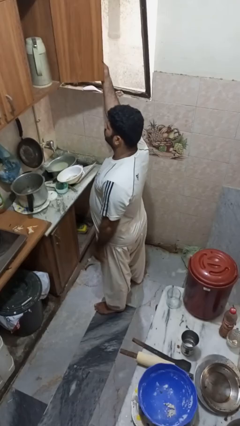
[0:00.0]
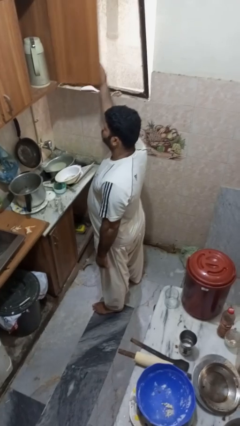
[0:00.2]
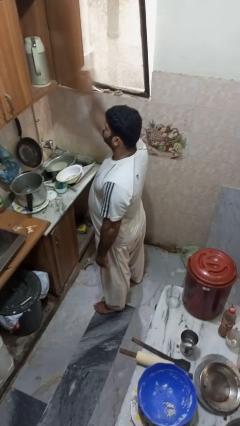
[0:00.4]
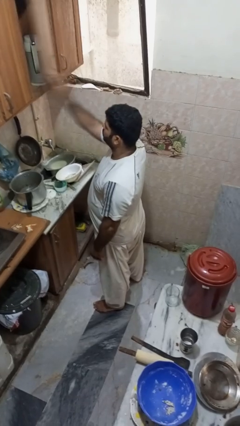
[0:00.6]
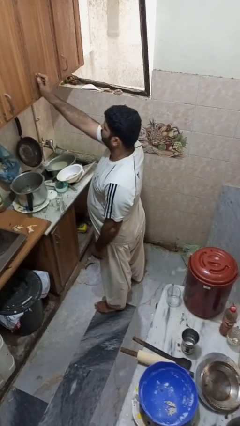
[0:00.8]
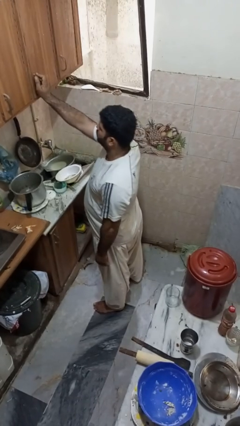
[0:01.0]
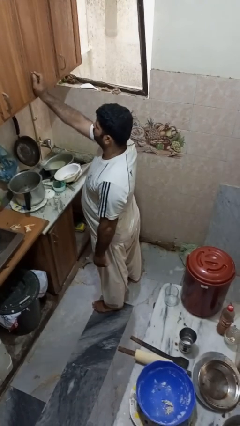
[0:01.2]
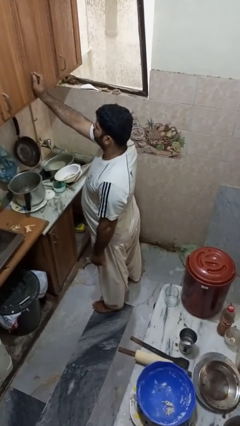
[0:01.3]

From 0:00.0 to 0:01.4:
person closes cabinet

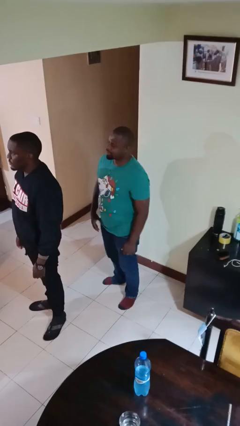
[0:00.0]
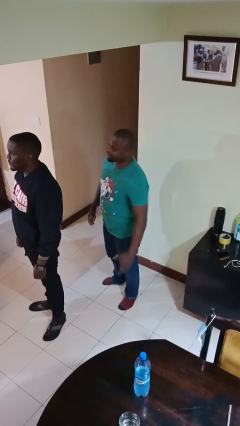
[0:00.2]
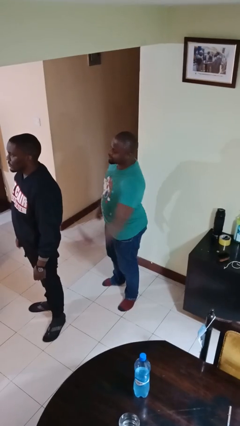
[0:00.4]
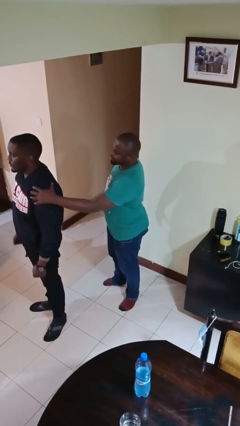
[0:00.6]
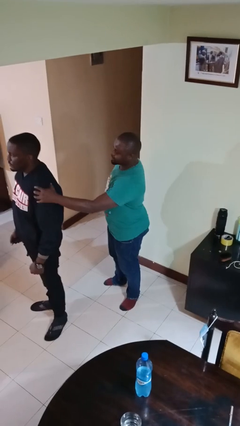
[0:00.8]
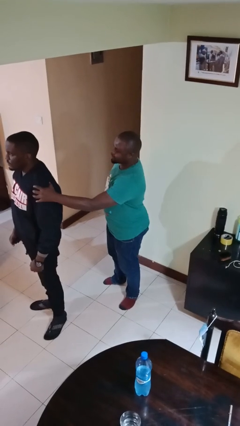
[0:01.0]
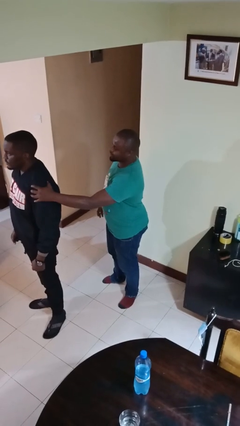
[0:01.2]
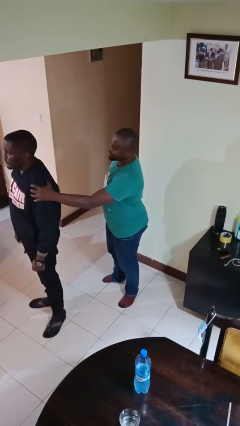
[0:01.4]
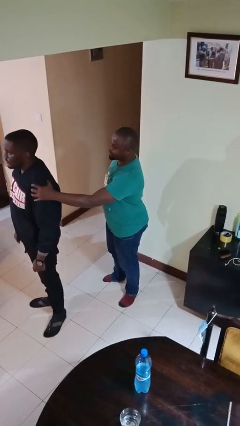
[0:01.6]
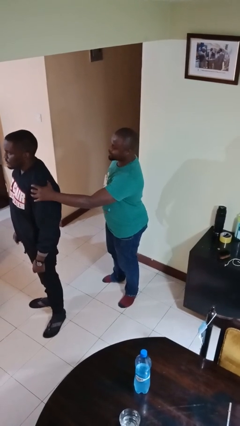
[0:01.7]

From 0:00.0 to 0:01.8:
person grabs person by shoulder

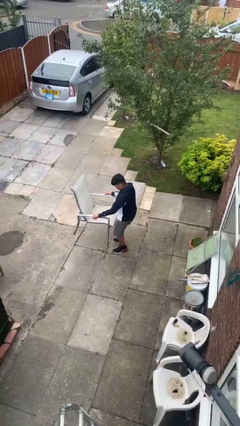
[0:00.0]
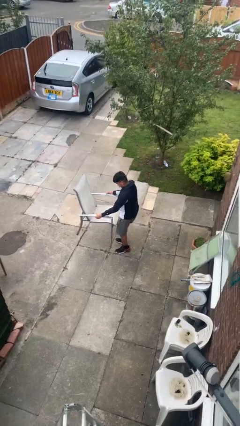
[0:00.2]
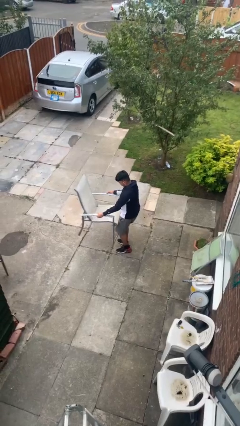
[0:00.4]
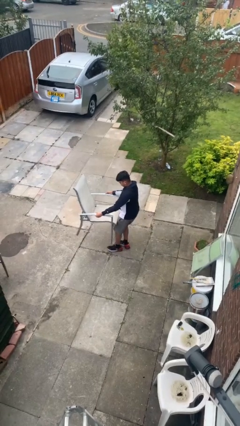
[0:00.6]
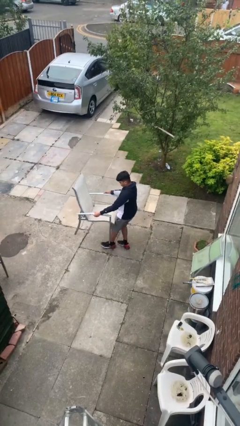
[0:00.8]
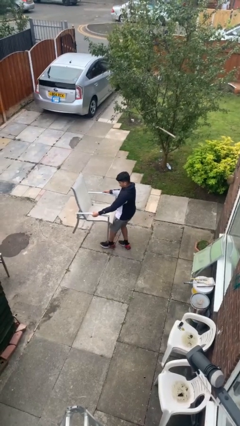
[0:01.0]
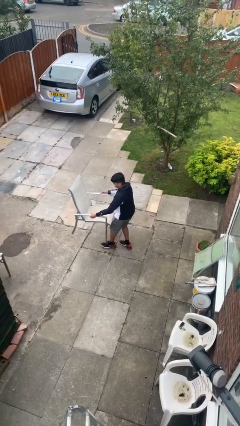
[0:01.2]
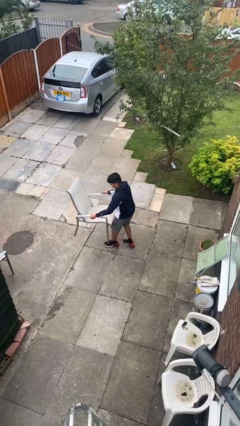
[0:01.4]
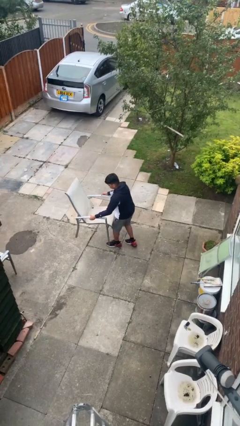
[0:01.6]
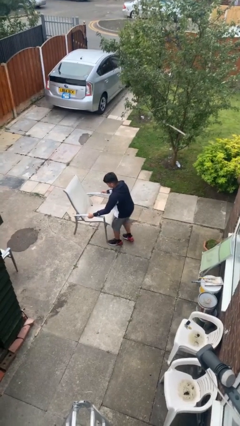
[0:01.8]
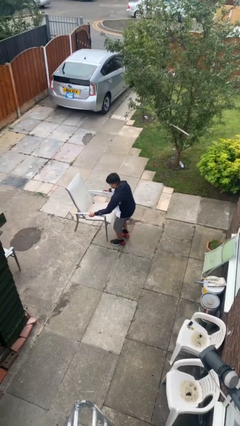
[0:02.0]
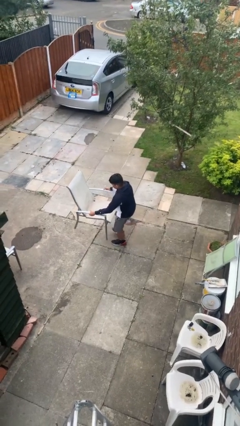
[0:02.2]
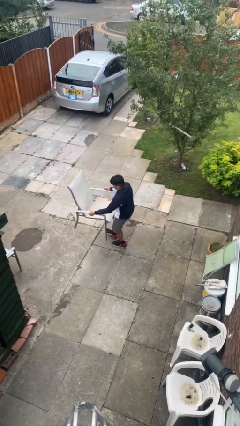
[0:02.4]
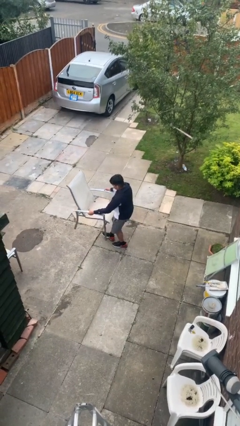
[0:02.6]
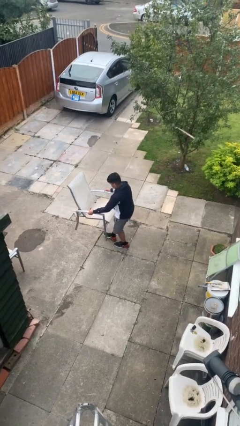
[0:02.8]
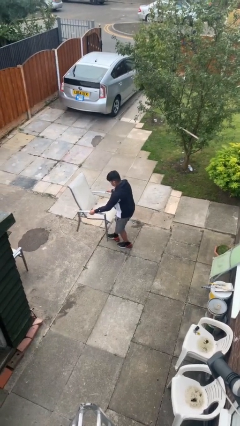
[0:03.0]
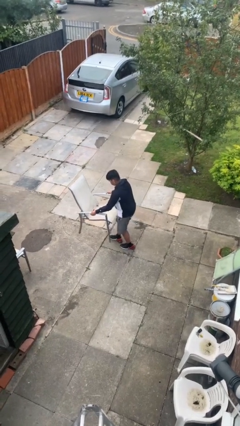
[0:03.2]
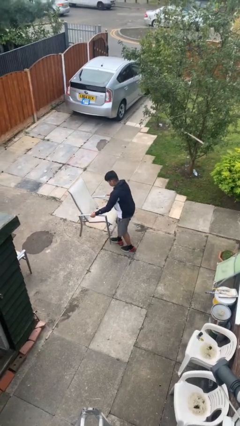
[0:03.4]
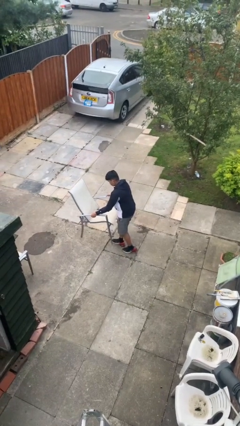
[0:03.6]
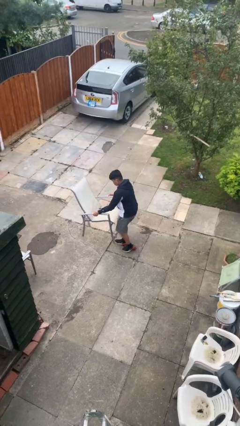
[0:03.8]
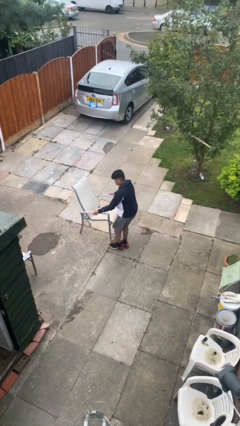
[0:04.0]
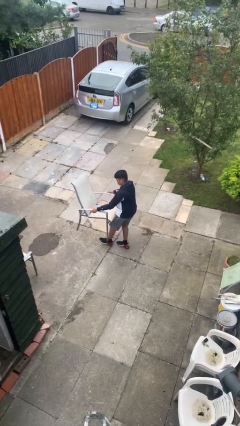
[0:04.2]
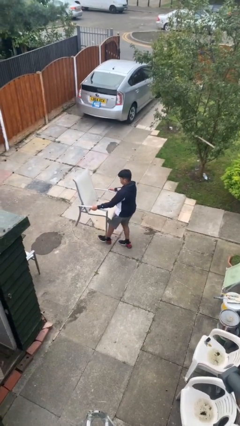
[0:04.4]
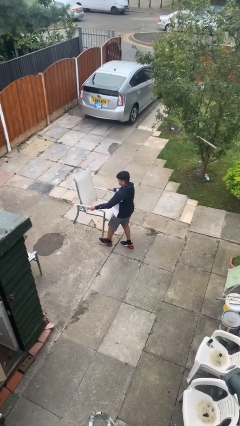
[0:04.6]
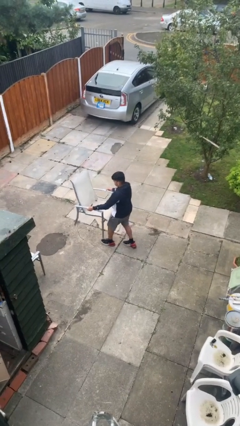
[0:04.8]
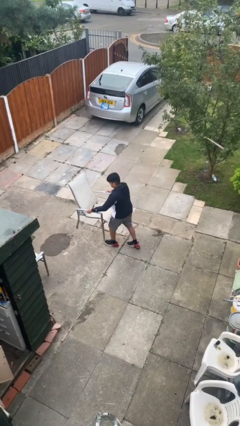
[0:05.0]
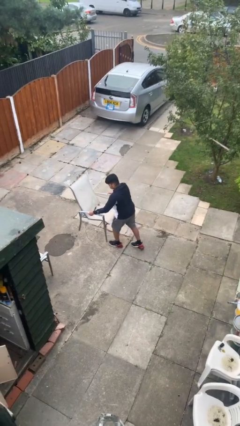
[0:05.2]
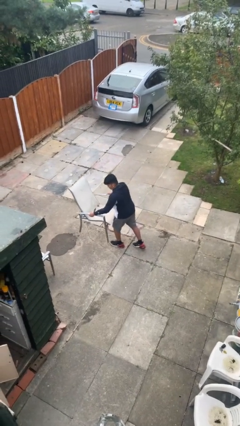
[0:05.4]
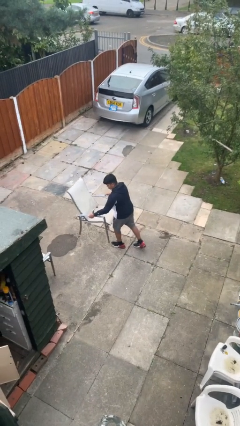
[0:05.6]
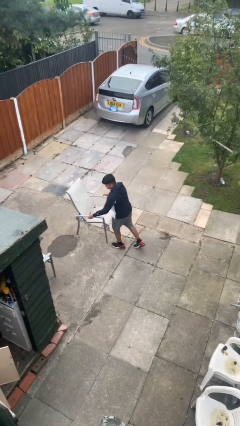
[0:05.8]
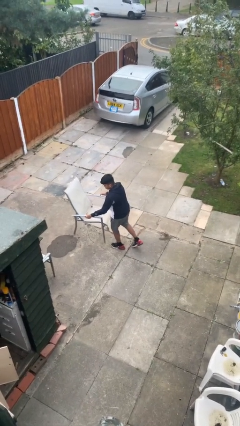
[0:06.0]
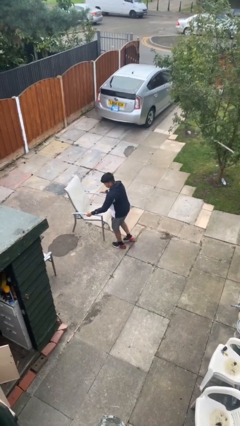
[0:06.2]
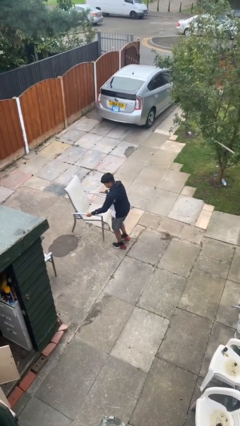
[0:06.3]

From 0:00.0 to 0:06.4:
person carries heavy object

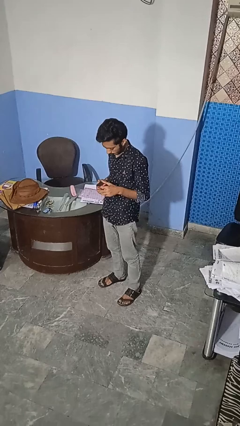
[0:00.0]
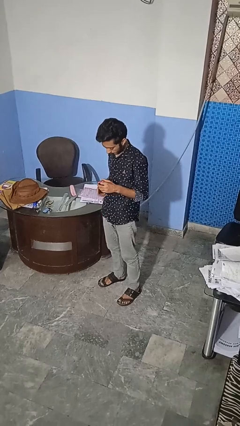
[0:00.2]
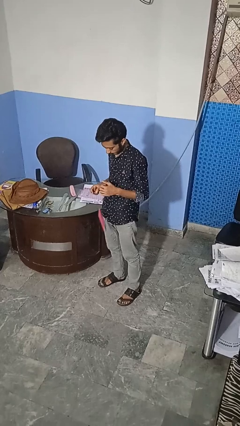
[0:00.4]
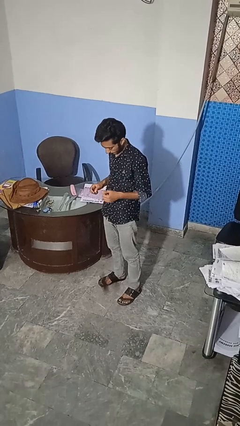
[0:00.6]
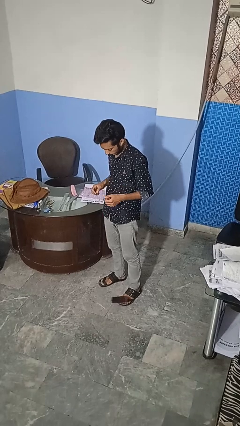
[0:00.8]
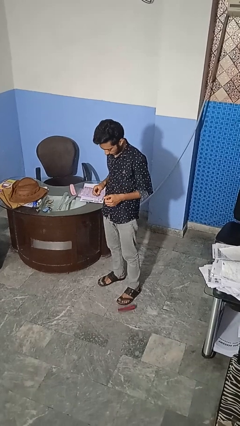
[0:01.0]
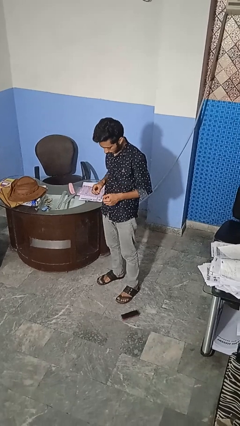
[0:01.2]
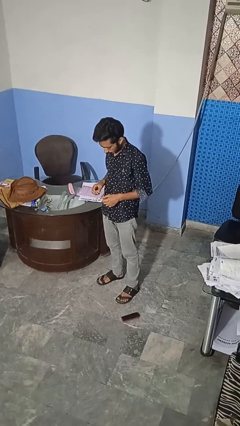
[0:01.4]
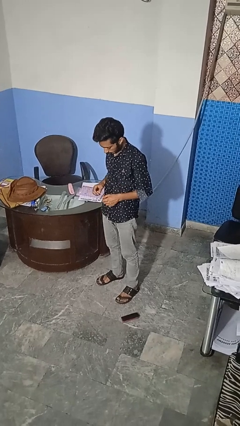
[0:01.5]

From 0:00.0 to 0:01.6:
person drops object

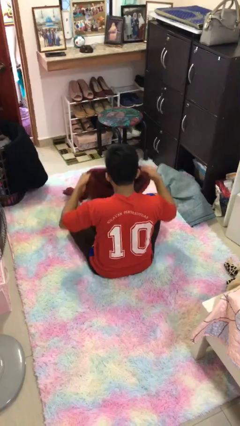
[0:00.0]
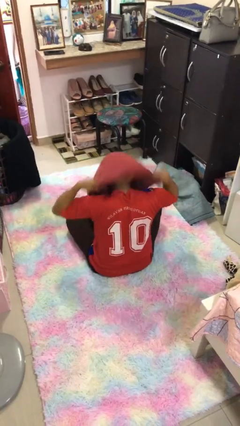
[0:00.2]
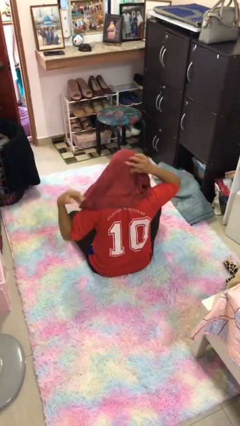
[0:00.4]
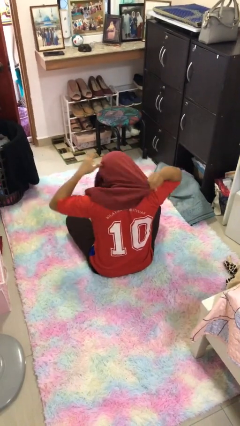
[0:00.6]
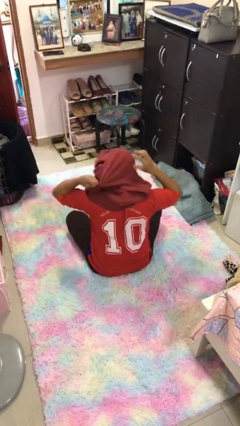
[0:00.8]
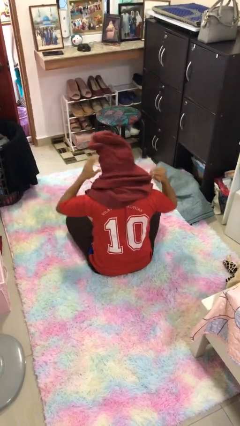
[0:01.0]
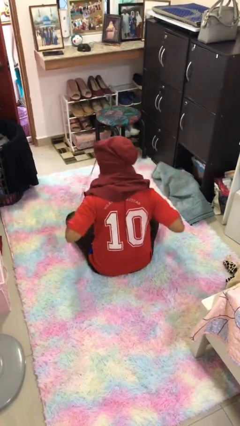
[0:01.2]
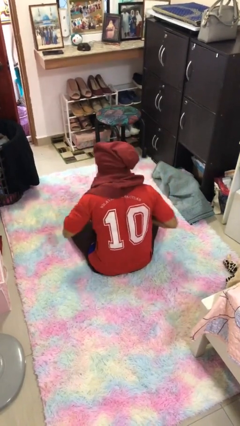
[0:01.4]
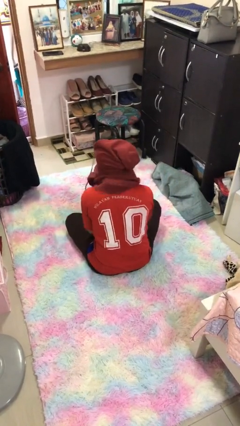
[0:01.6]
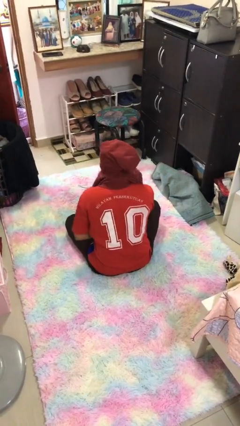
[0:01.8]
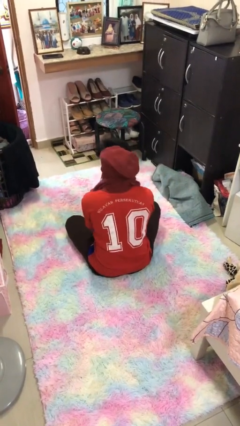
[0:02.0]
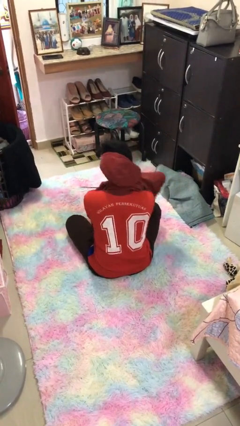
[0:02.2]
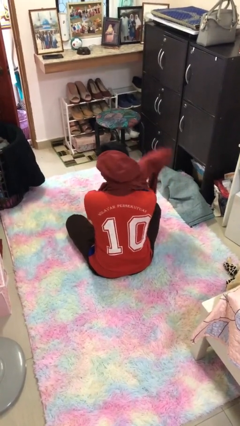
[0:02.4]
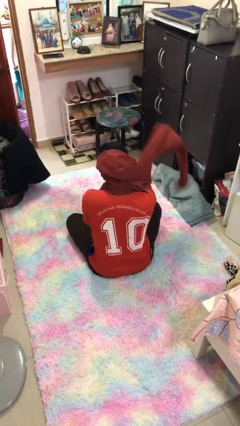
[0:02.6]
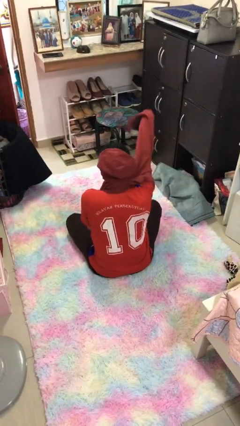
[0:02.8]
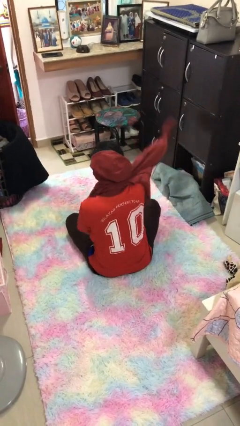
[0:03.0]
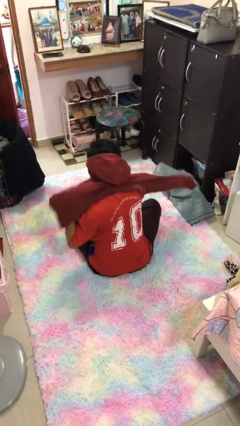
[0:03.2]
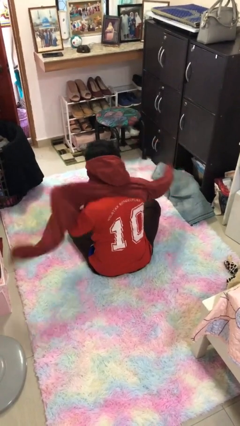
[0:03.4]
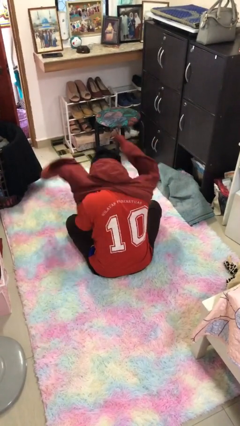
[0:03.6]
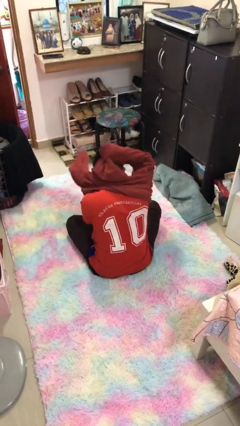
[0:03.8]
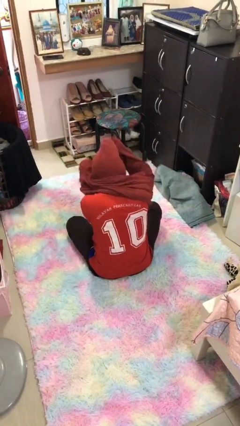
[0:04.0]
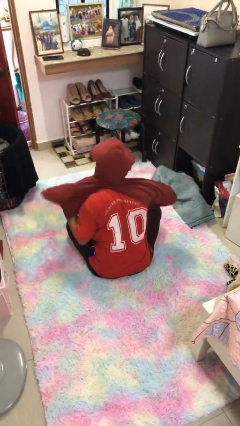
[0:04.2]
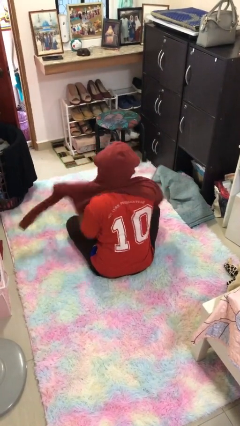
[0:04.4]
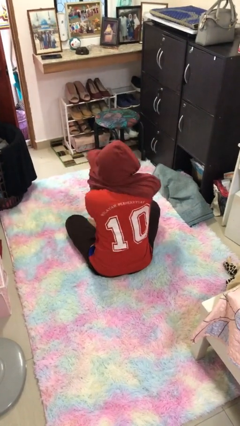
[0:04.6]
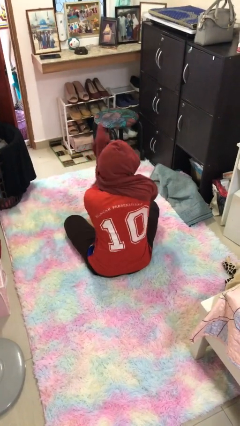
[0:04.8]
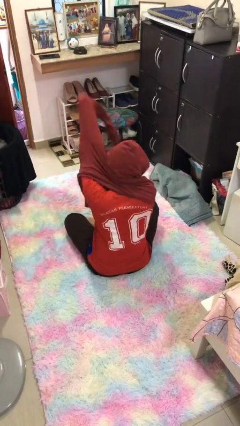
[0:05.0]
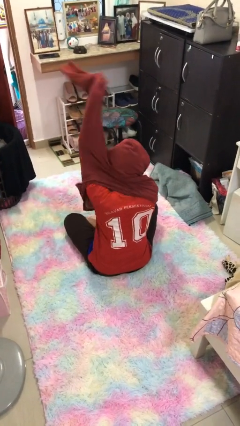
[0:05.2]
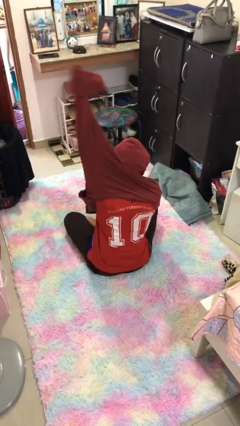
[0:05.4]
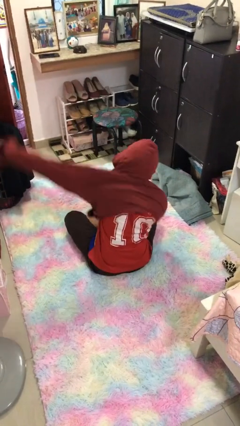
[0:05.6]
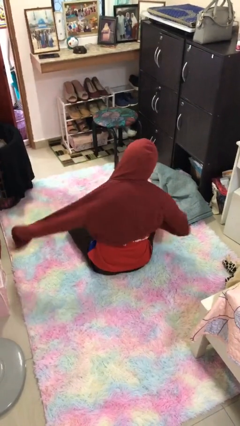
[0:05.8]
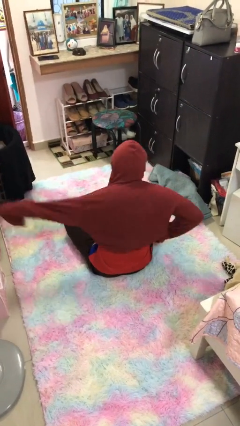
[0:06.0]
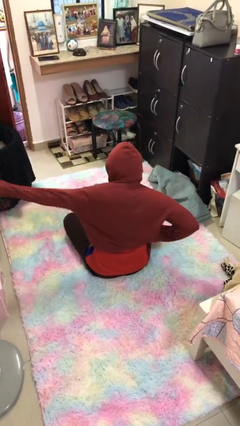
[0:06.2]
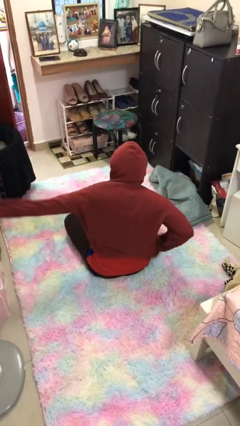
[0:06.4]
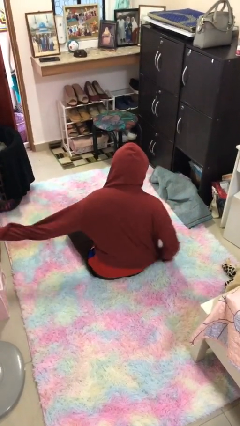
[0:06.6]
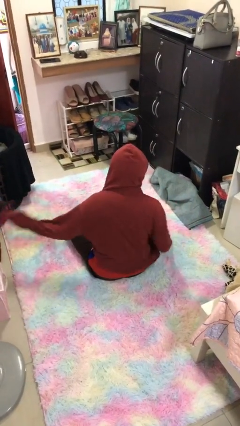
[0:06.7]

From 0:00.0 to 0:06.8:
person puts on hoodie
